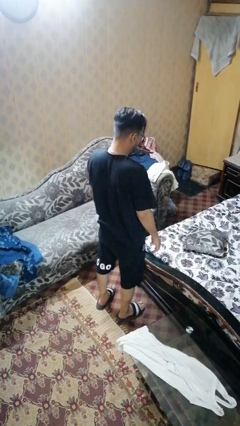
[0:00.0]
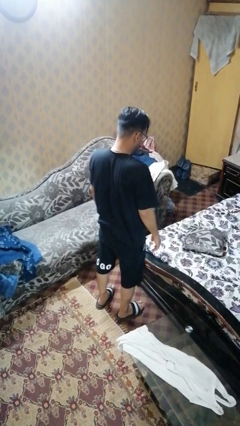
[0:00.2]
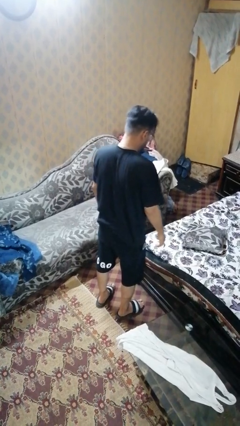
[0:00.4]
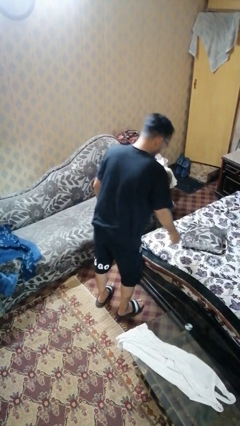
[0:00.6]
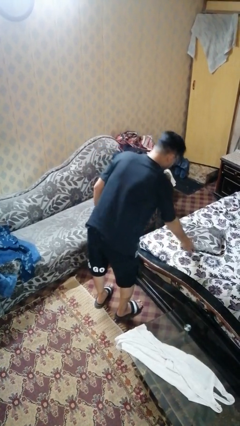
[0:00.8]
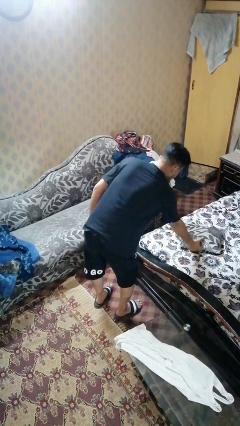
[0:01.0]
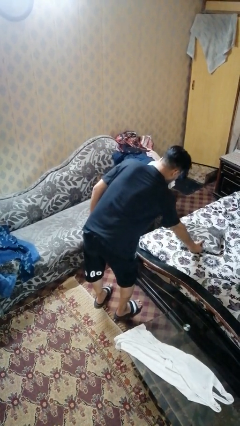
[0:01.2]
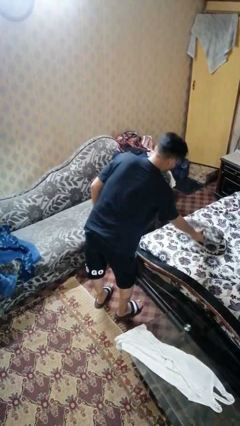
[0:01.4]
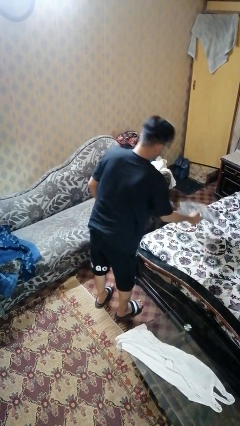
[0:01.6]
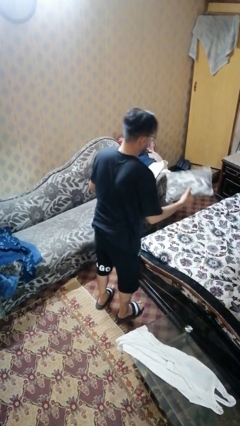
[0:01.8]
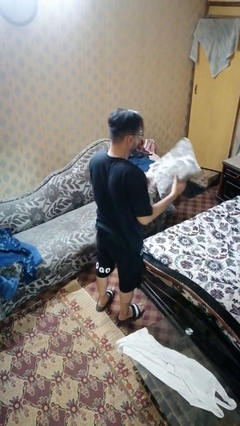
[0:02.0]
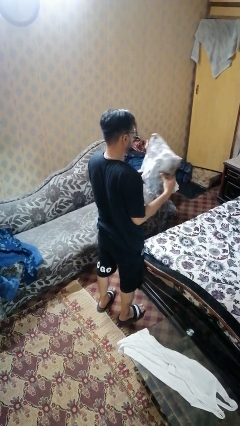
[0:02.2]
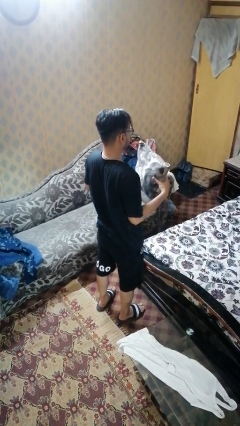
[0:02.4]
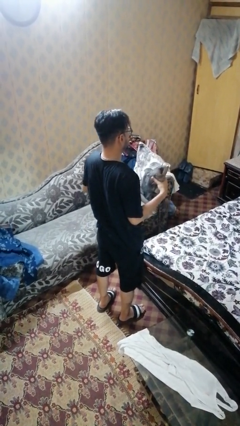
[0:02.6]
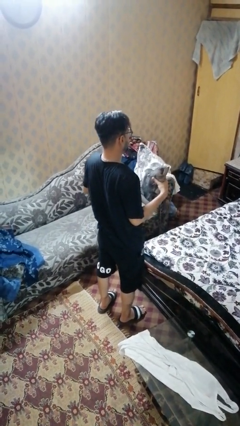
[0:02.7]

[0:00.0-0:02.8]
person picks up object from bed

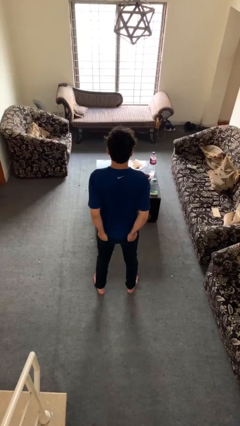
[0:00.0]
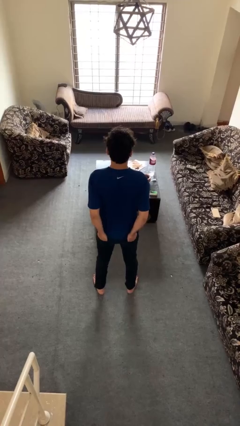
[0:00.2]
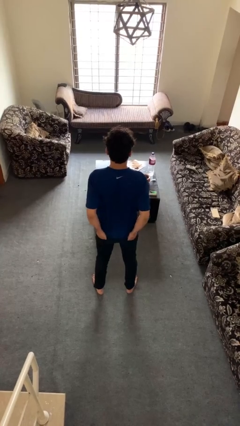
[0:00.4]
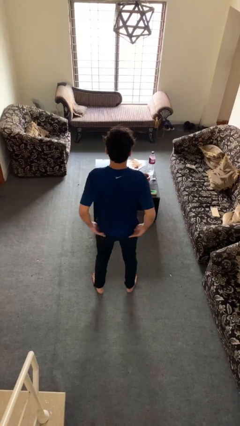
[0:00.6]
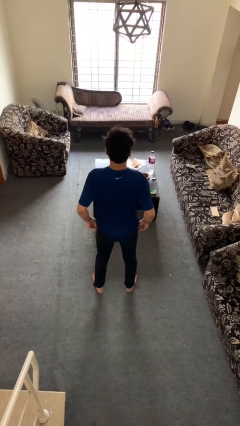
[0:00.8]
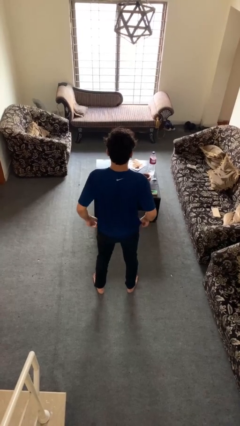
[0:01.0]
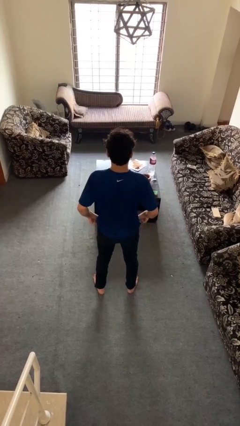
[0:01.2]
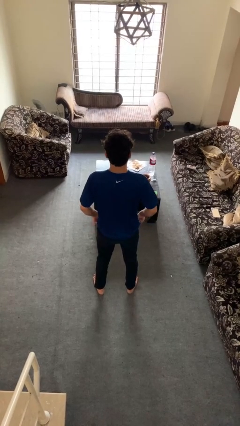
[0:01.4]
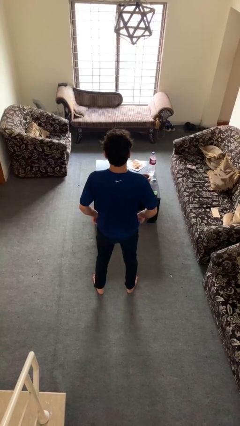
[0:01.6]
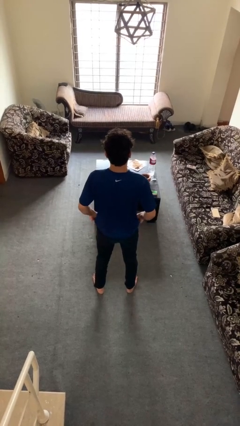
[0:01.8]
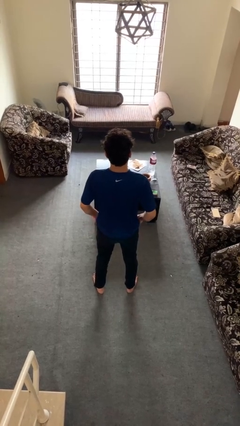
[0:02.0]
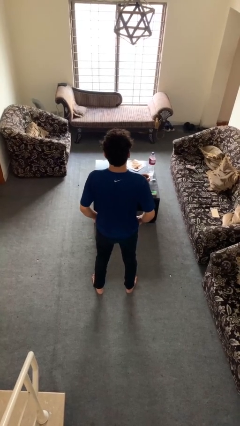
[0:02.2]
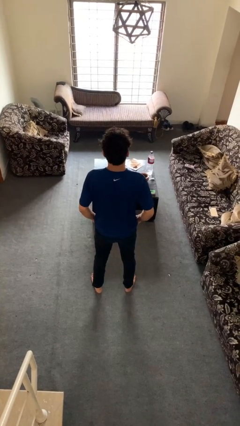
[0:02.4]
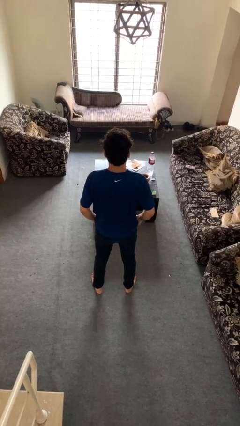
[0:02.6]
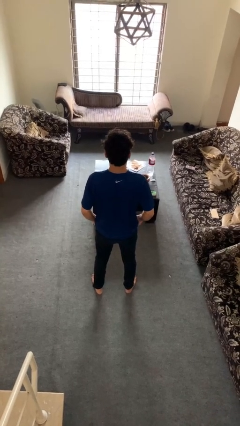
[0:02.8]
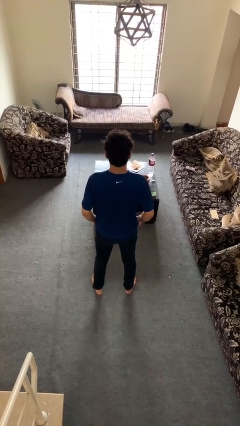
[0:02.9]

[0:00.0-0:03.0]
person puts hands in back pockets

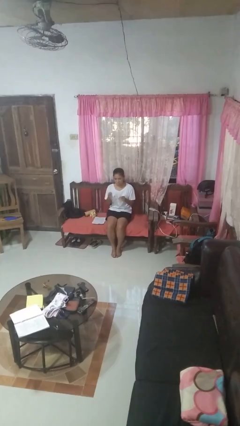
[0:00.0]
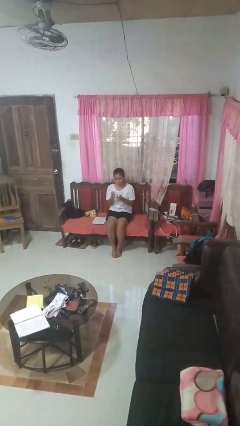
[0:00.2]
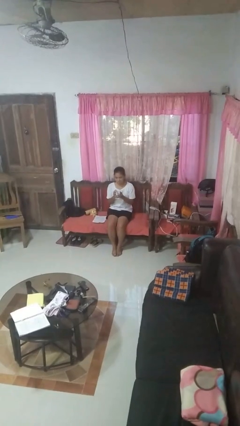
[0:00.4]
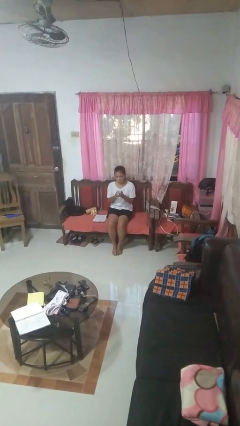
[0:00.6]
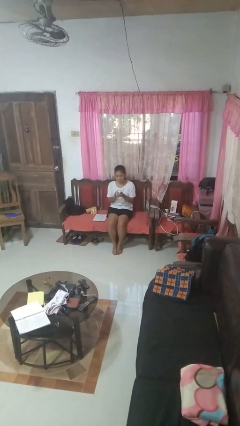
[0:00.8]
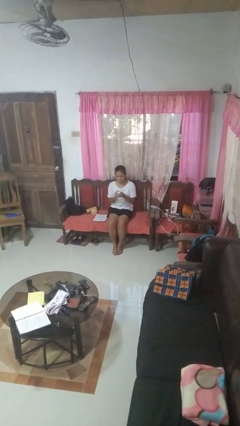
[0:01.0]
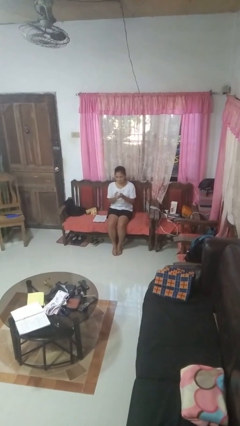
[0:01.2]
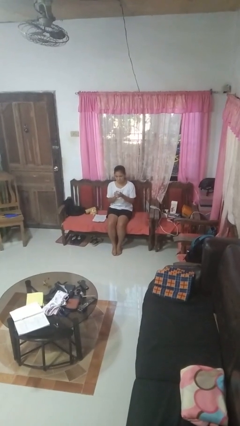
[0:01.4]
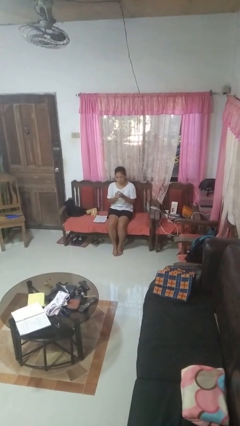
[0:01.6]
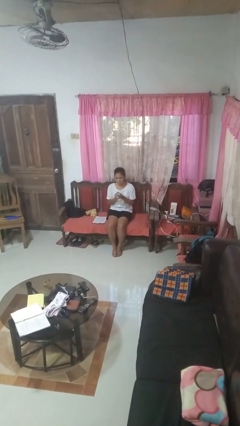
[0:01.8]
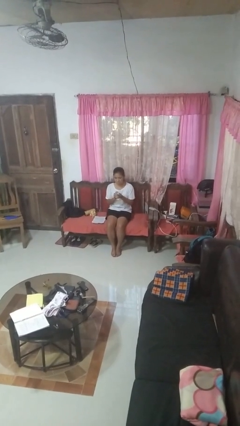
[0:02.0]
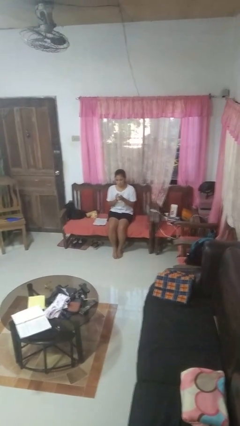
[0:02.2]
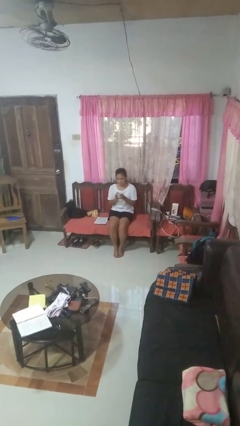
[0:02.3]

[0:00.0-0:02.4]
person crumples paper

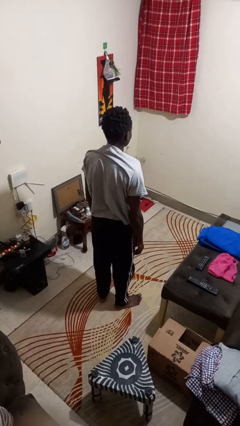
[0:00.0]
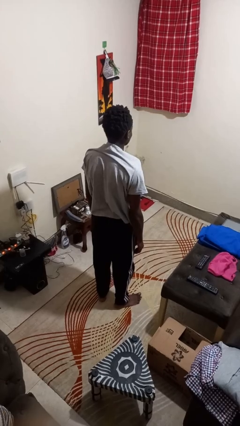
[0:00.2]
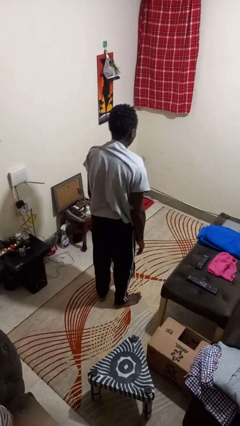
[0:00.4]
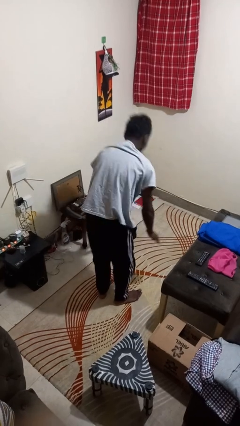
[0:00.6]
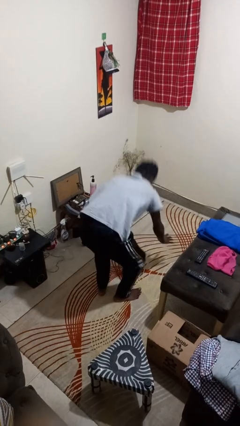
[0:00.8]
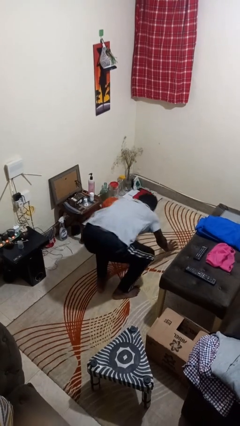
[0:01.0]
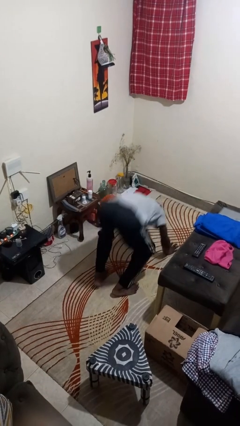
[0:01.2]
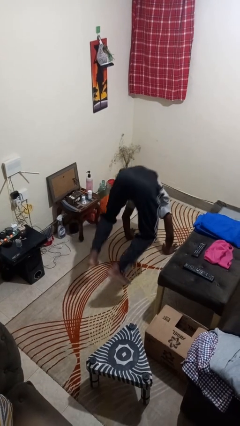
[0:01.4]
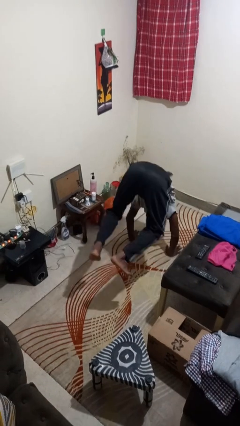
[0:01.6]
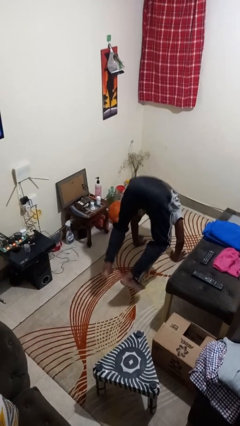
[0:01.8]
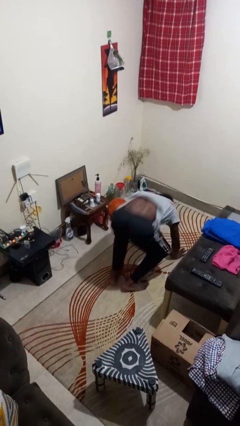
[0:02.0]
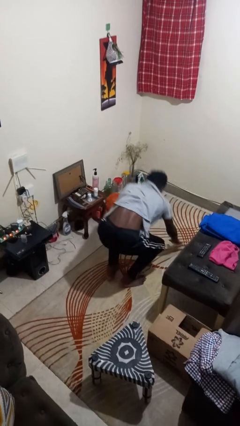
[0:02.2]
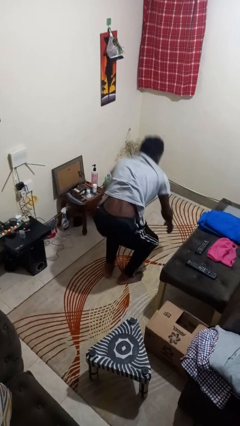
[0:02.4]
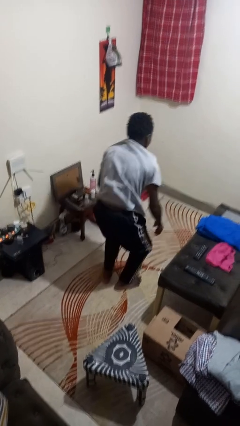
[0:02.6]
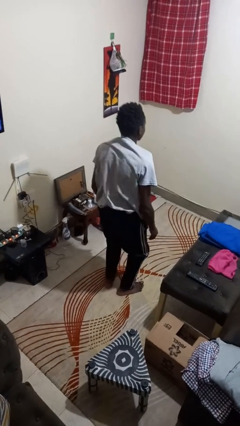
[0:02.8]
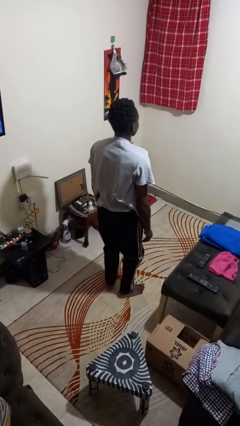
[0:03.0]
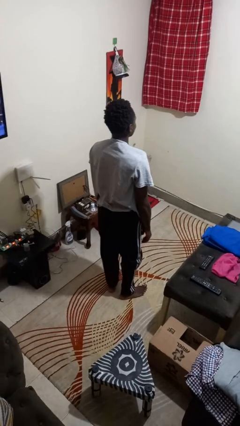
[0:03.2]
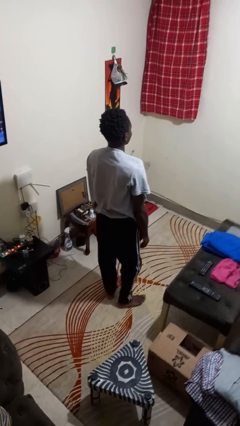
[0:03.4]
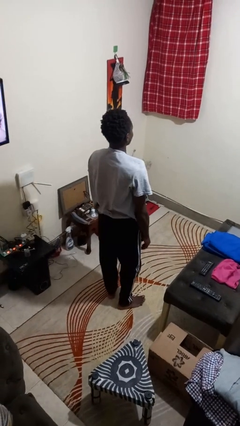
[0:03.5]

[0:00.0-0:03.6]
person handstand

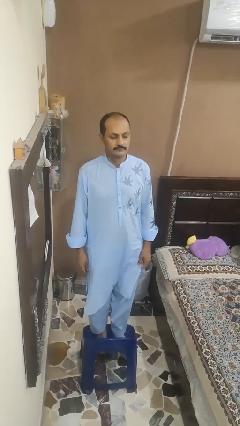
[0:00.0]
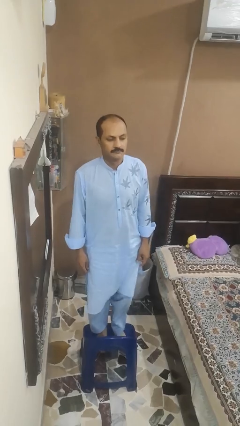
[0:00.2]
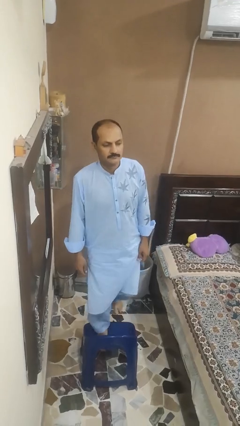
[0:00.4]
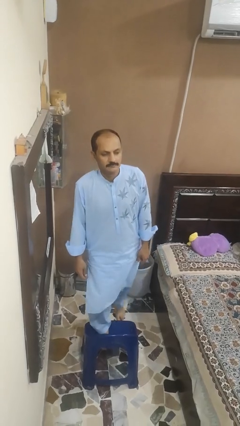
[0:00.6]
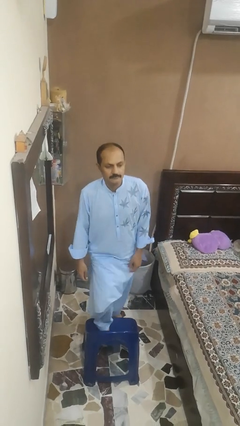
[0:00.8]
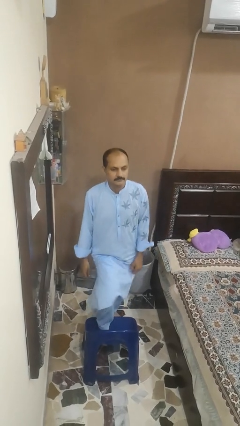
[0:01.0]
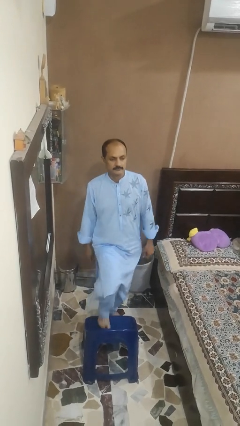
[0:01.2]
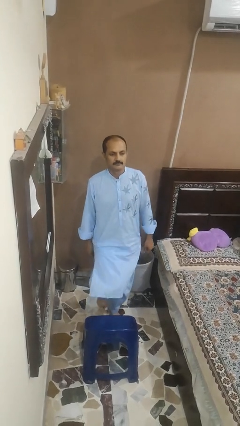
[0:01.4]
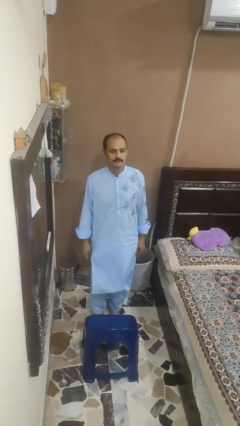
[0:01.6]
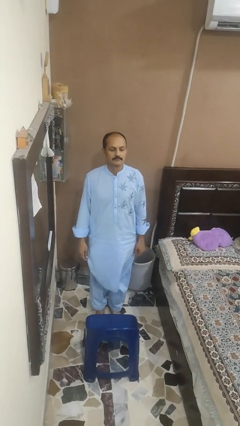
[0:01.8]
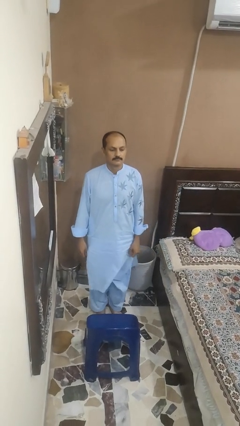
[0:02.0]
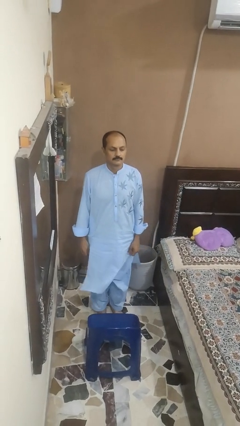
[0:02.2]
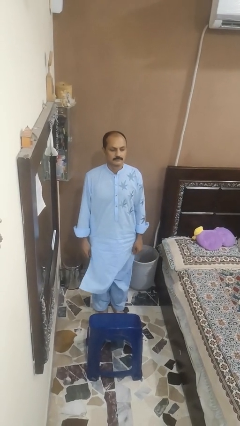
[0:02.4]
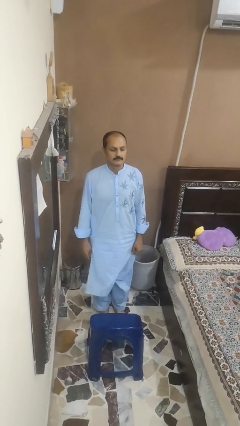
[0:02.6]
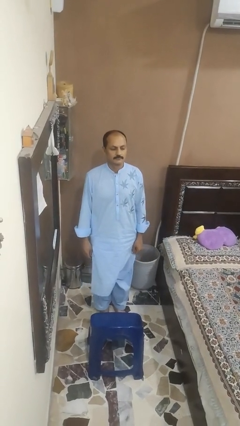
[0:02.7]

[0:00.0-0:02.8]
person climbs off chair

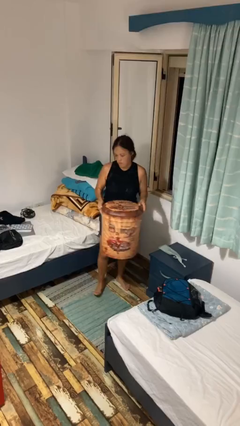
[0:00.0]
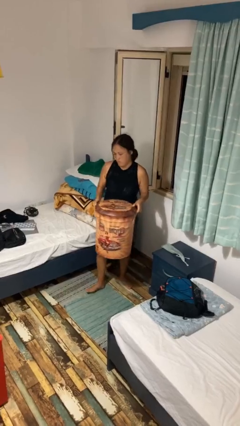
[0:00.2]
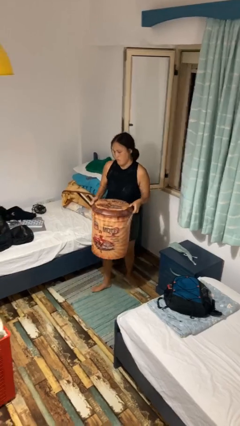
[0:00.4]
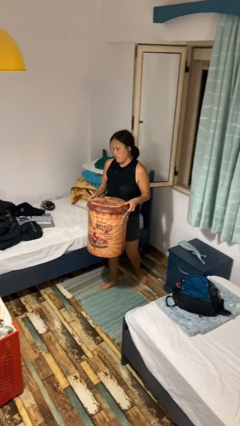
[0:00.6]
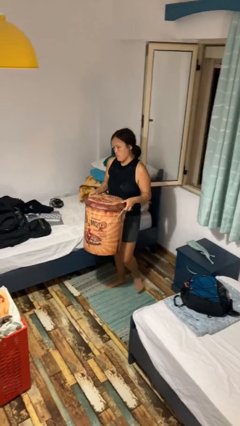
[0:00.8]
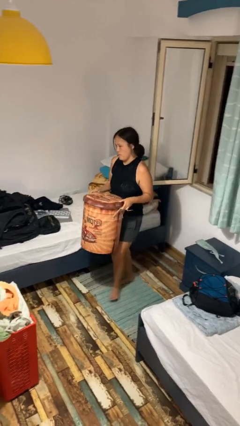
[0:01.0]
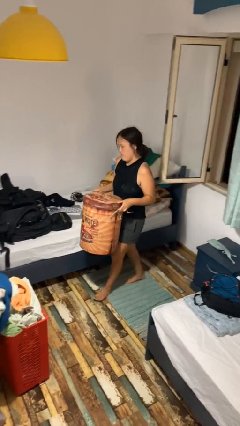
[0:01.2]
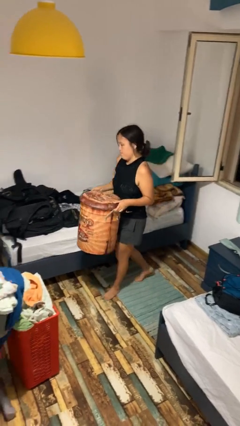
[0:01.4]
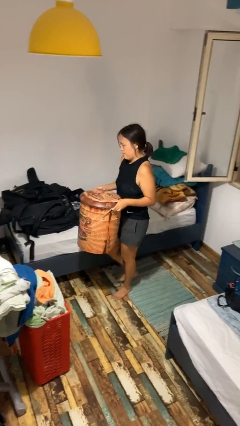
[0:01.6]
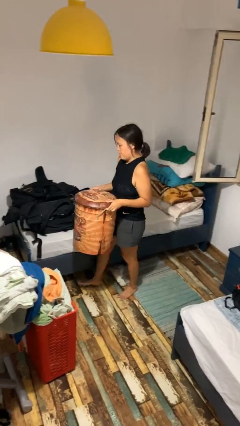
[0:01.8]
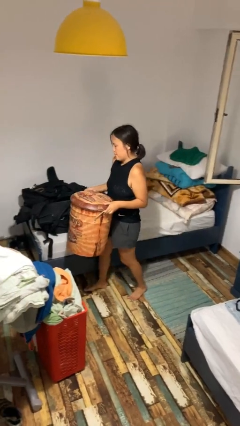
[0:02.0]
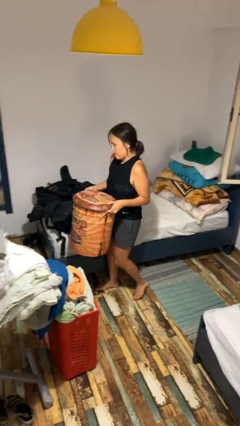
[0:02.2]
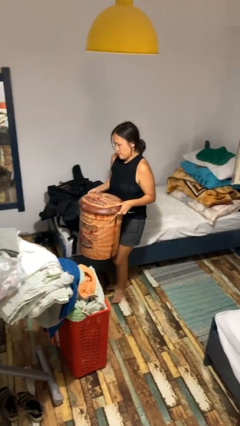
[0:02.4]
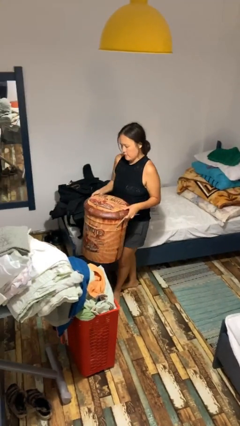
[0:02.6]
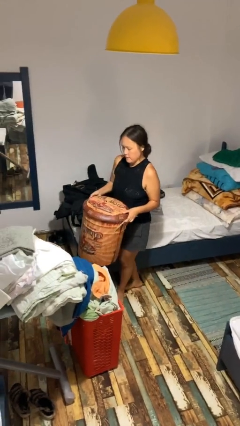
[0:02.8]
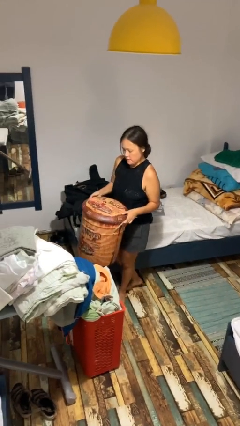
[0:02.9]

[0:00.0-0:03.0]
person carries furniture
